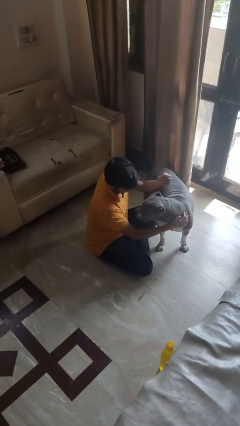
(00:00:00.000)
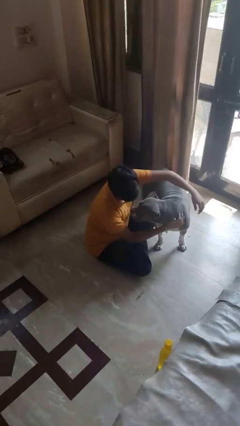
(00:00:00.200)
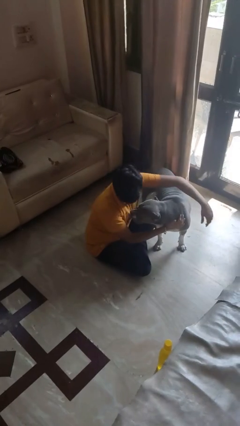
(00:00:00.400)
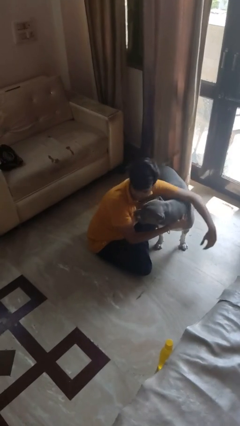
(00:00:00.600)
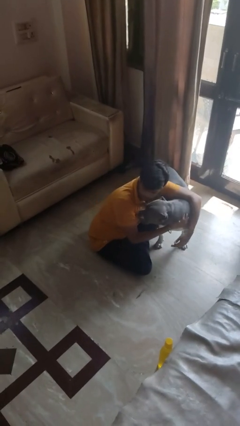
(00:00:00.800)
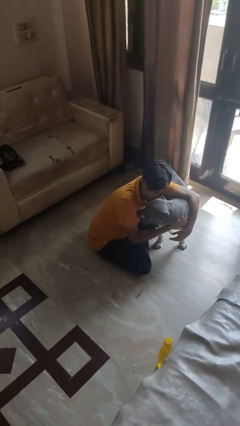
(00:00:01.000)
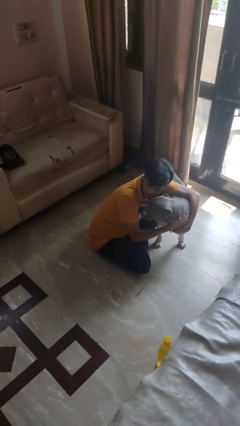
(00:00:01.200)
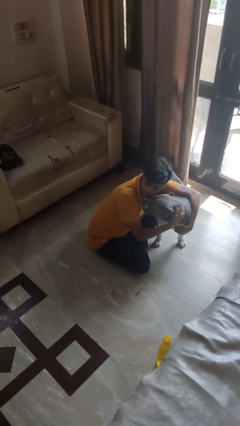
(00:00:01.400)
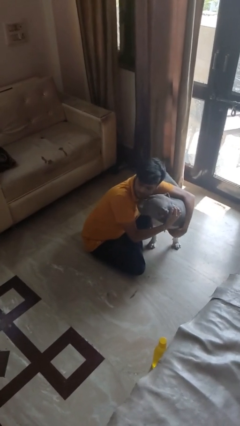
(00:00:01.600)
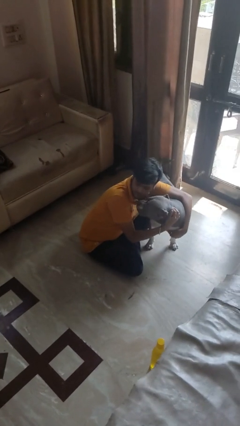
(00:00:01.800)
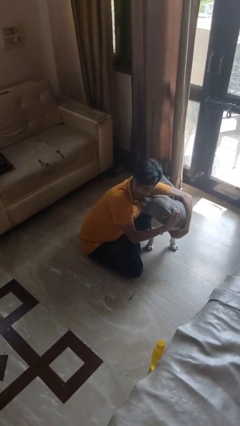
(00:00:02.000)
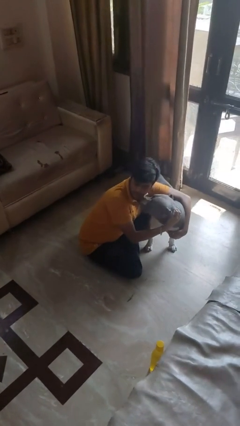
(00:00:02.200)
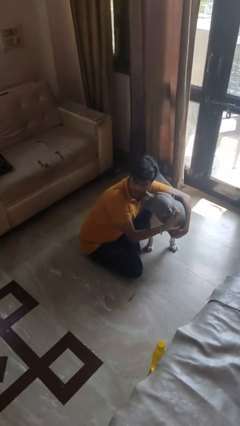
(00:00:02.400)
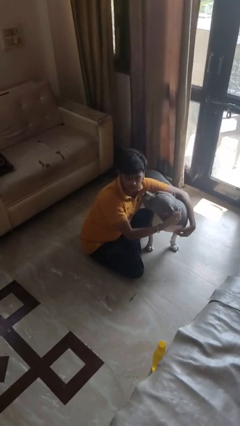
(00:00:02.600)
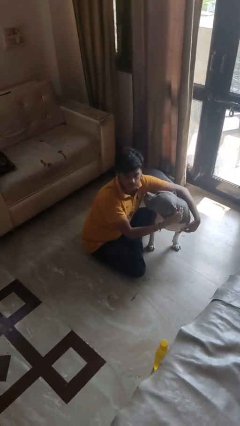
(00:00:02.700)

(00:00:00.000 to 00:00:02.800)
person hugs dog

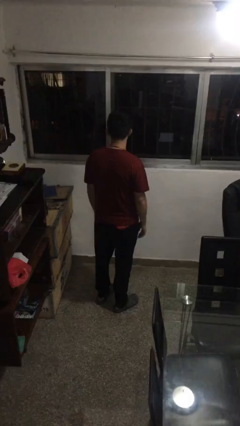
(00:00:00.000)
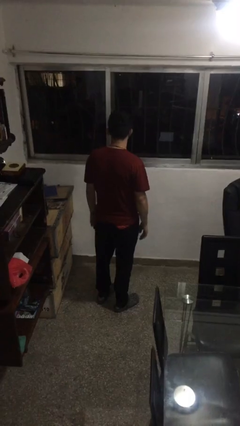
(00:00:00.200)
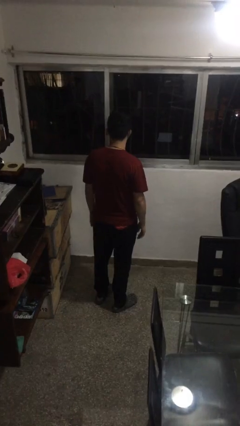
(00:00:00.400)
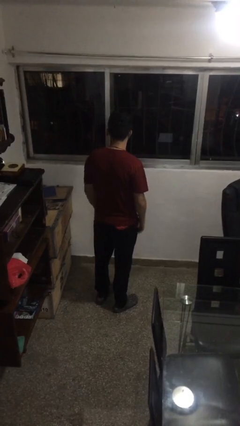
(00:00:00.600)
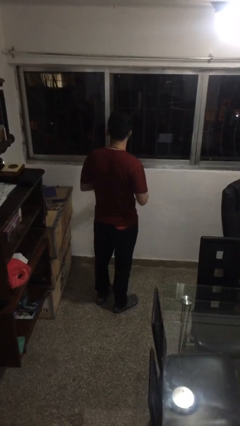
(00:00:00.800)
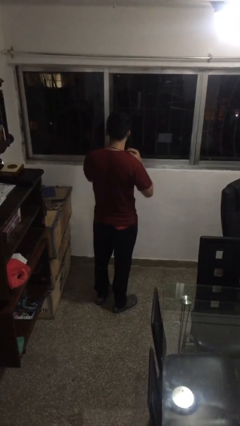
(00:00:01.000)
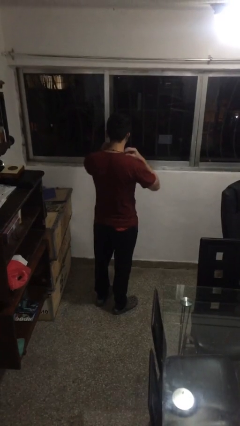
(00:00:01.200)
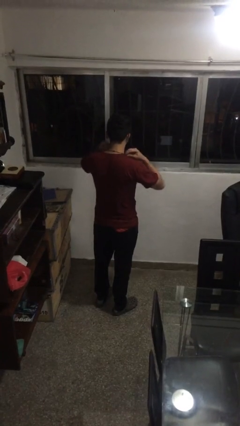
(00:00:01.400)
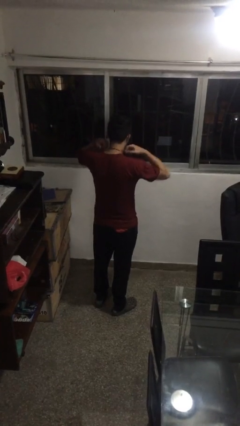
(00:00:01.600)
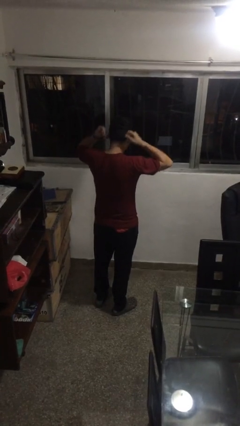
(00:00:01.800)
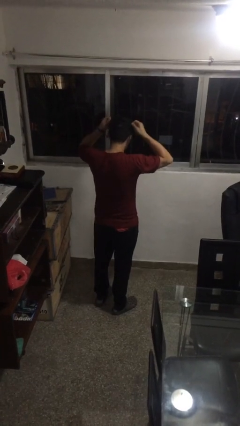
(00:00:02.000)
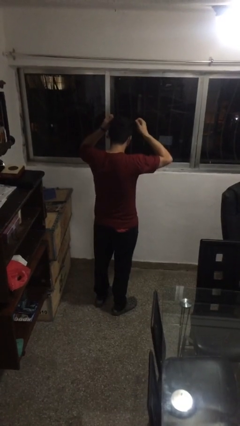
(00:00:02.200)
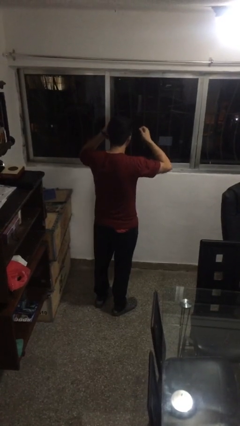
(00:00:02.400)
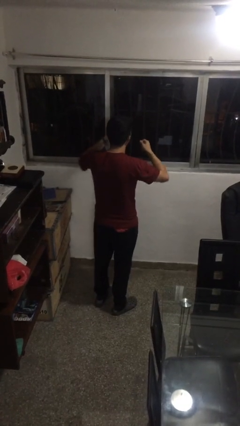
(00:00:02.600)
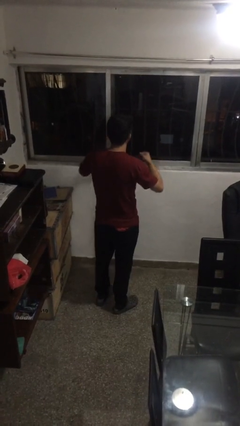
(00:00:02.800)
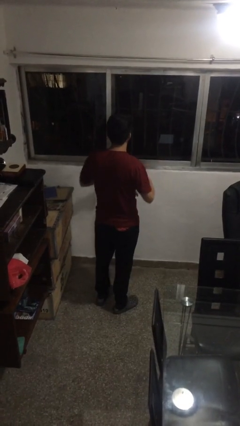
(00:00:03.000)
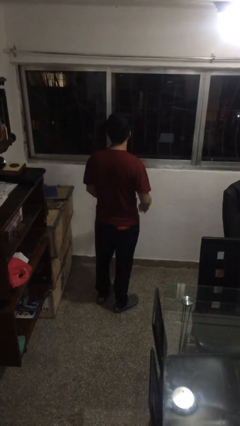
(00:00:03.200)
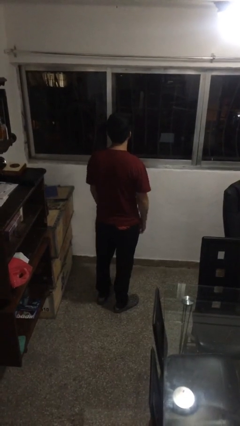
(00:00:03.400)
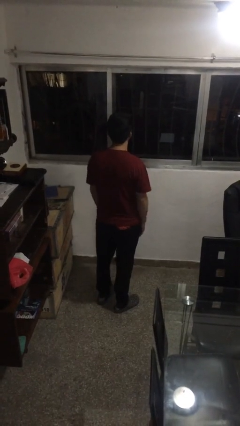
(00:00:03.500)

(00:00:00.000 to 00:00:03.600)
person takes off necklace

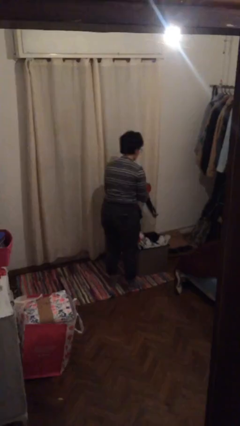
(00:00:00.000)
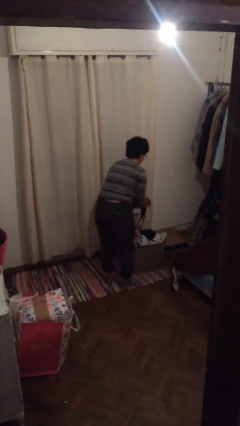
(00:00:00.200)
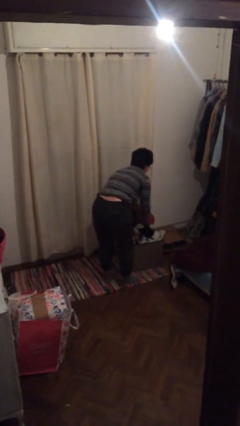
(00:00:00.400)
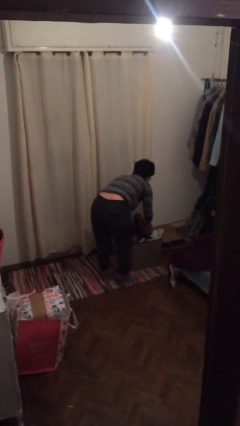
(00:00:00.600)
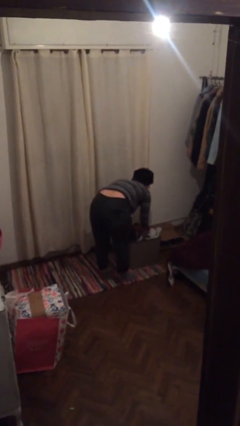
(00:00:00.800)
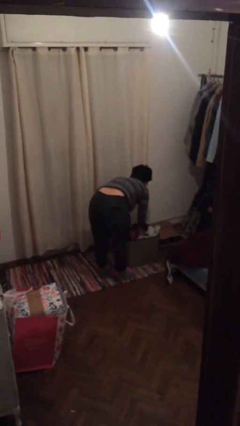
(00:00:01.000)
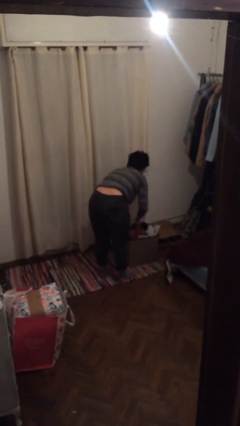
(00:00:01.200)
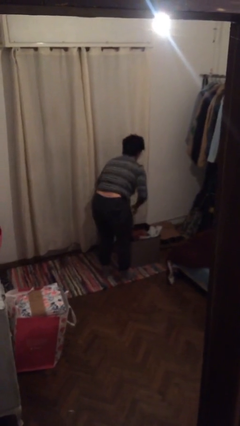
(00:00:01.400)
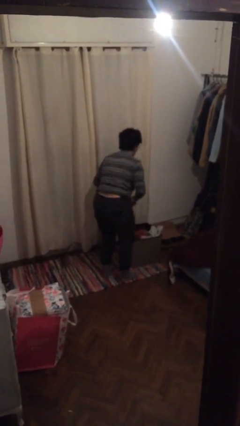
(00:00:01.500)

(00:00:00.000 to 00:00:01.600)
person puts object into basket

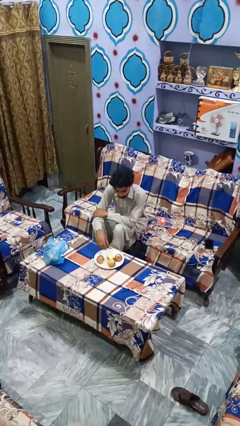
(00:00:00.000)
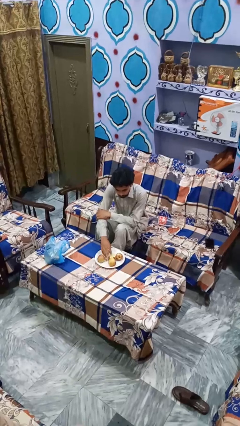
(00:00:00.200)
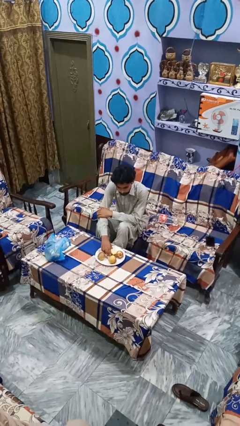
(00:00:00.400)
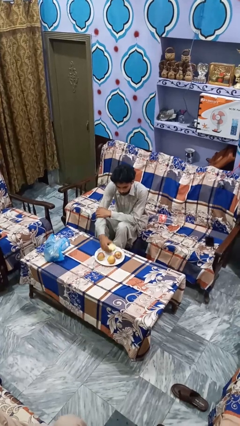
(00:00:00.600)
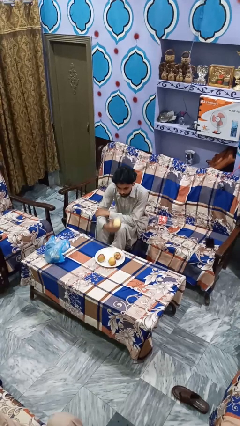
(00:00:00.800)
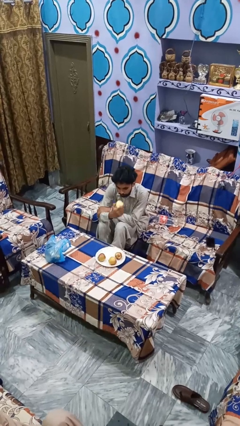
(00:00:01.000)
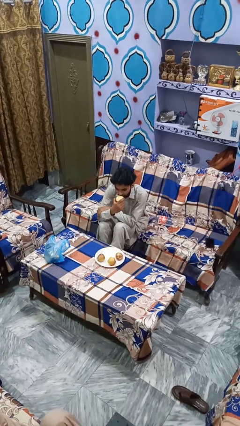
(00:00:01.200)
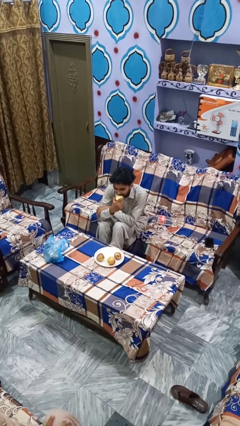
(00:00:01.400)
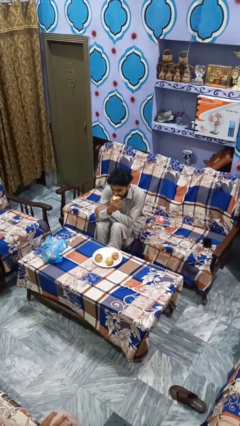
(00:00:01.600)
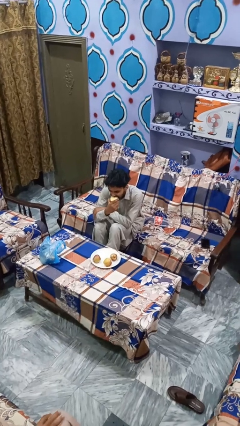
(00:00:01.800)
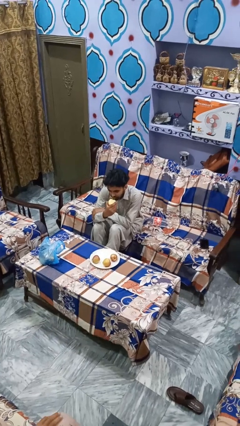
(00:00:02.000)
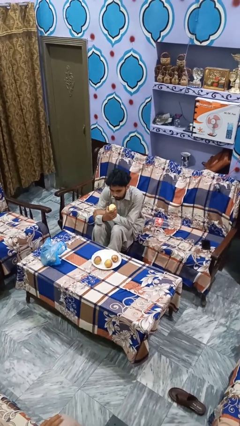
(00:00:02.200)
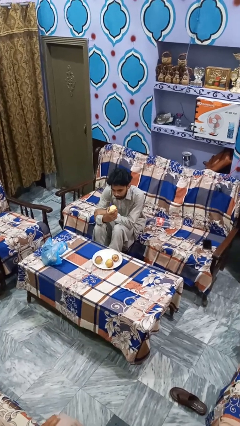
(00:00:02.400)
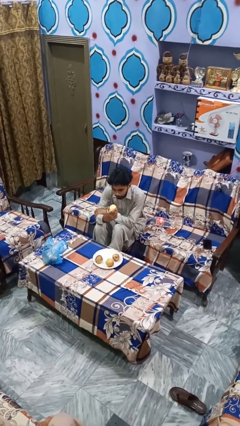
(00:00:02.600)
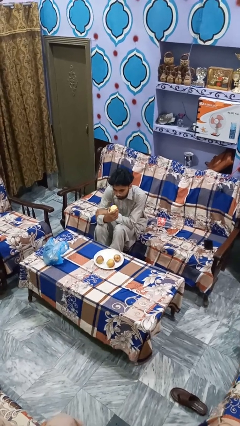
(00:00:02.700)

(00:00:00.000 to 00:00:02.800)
person eats apple

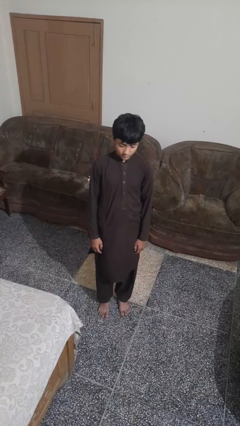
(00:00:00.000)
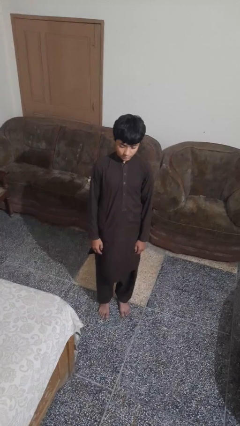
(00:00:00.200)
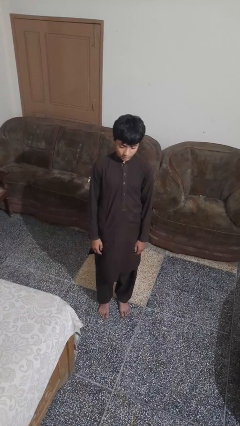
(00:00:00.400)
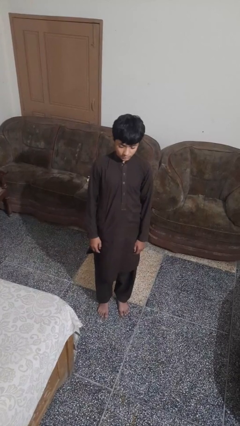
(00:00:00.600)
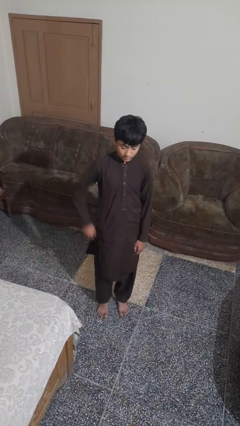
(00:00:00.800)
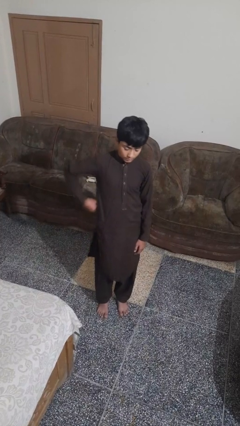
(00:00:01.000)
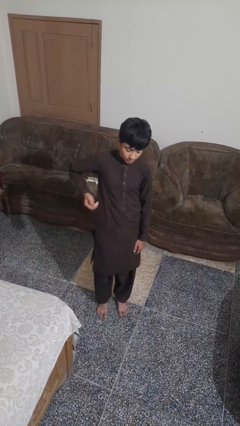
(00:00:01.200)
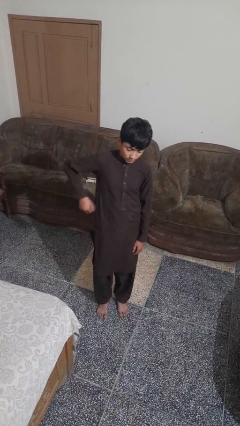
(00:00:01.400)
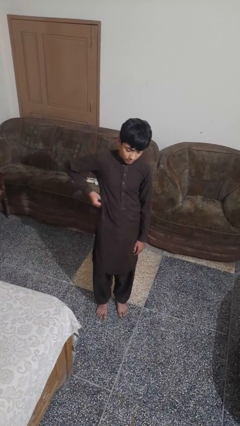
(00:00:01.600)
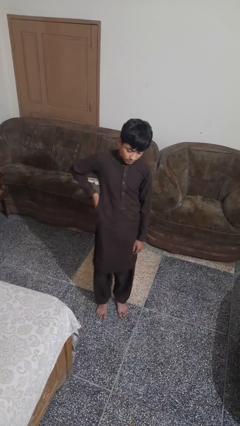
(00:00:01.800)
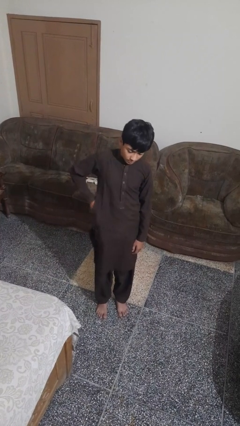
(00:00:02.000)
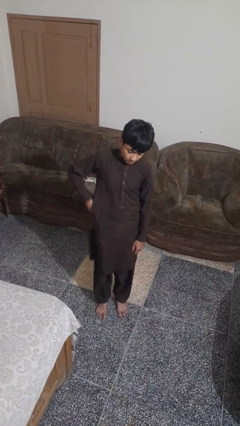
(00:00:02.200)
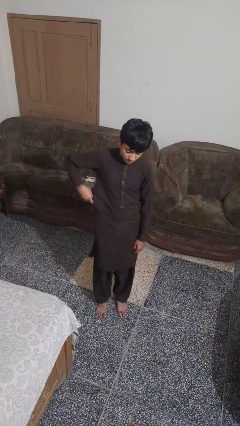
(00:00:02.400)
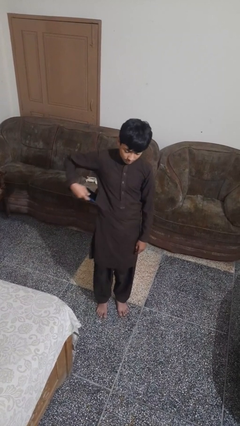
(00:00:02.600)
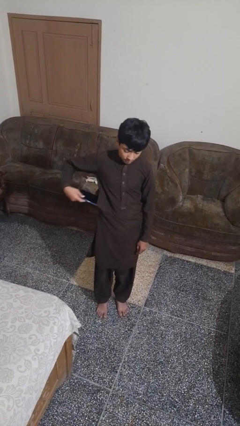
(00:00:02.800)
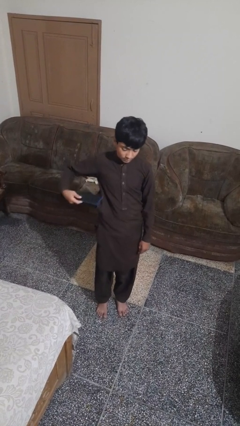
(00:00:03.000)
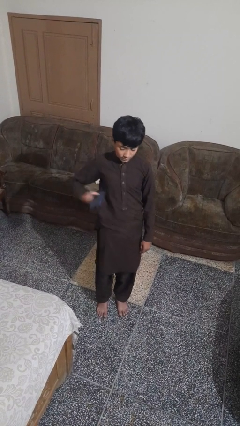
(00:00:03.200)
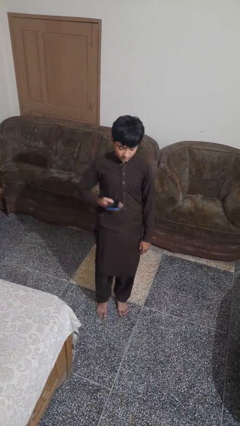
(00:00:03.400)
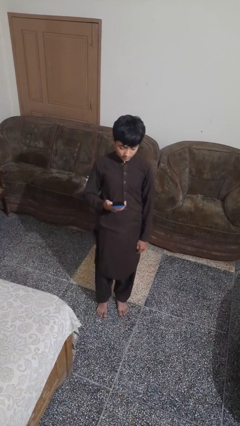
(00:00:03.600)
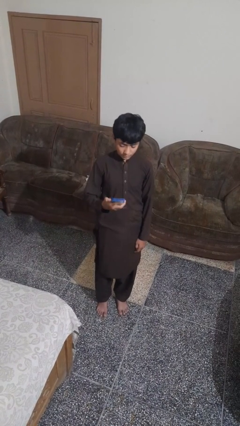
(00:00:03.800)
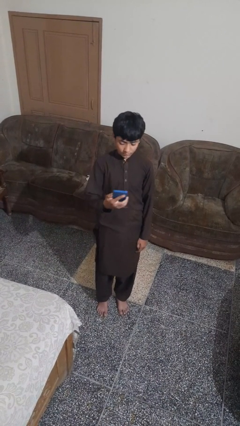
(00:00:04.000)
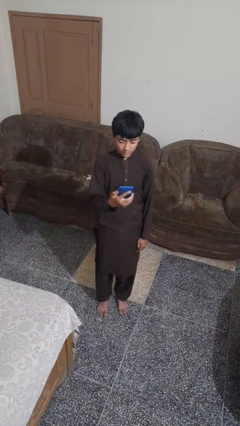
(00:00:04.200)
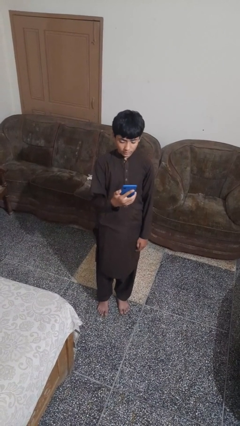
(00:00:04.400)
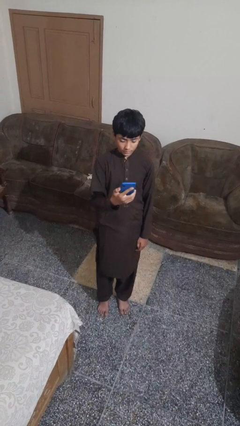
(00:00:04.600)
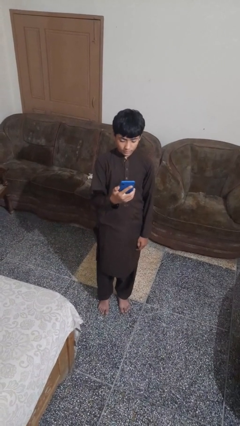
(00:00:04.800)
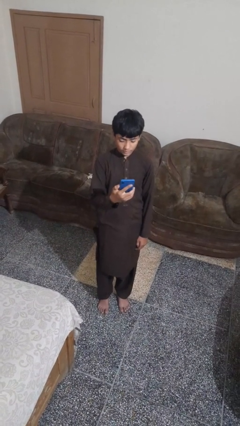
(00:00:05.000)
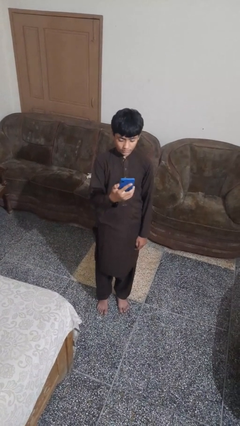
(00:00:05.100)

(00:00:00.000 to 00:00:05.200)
person takes phone from pocket

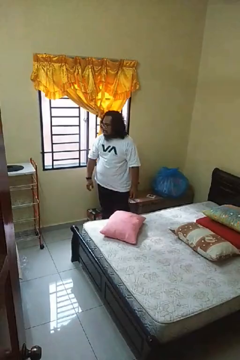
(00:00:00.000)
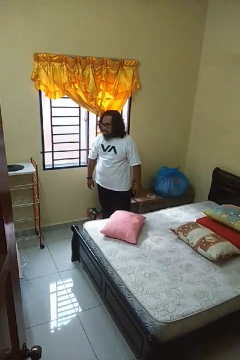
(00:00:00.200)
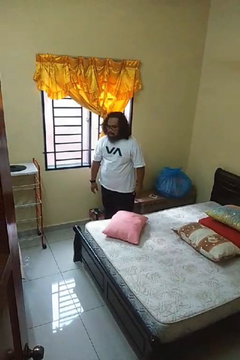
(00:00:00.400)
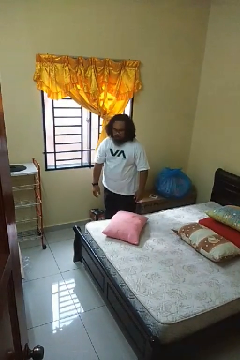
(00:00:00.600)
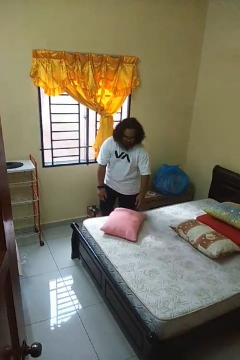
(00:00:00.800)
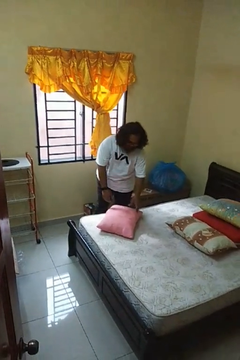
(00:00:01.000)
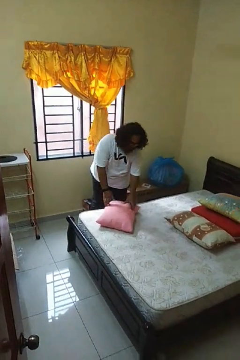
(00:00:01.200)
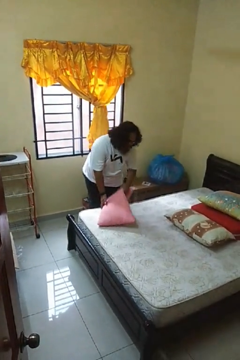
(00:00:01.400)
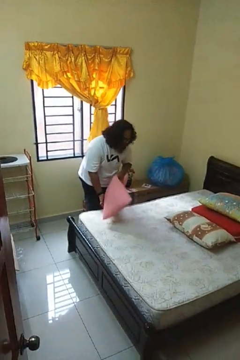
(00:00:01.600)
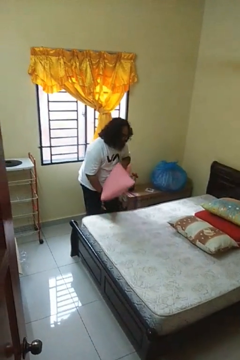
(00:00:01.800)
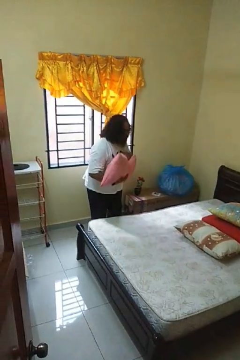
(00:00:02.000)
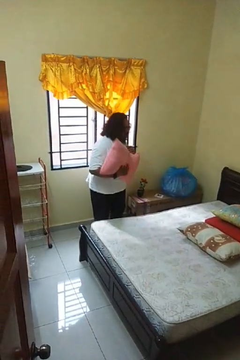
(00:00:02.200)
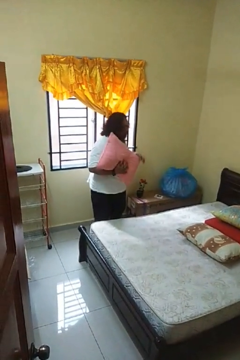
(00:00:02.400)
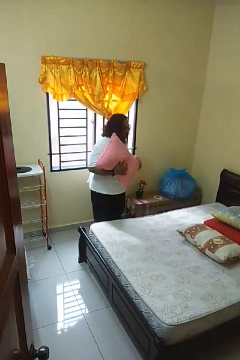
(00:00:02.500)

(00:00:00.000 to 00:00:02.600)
person picks up object from bed
